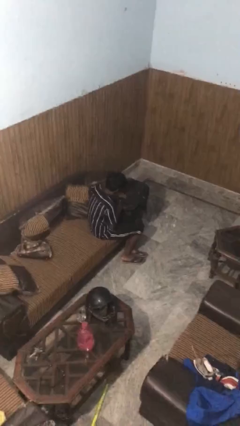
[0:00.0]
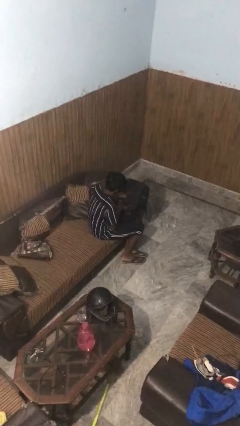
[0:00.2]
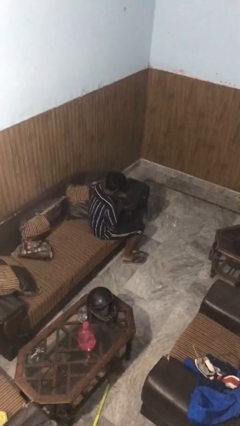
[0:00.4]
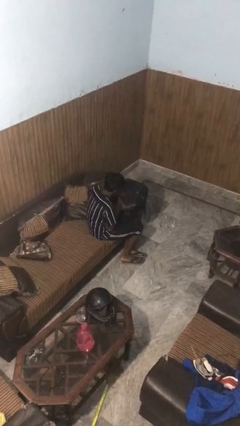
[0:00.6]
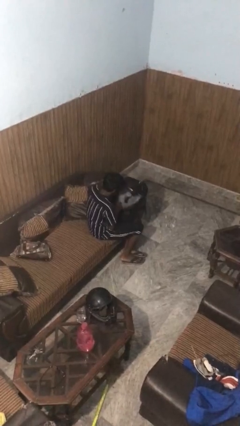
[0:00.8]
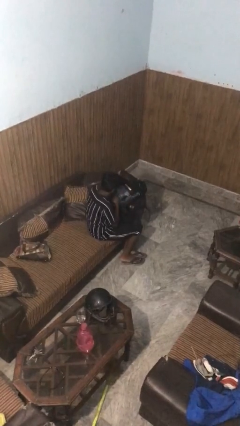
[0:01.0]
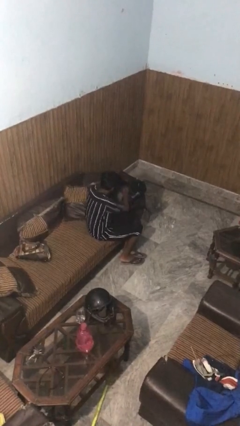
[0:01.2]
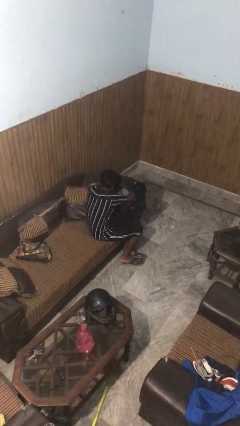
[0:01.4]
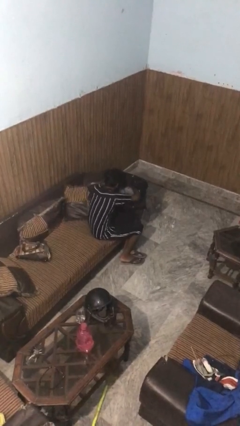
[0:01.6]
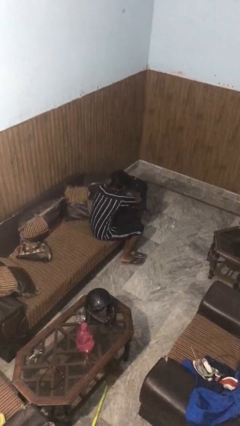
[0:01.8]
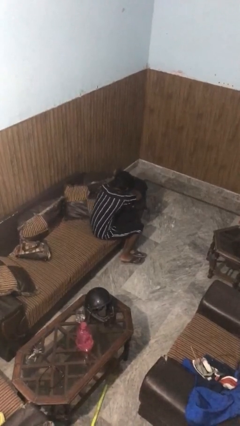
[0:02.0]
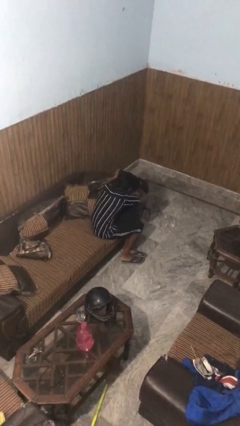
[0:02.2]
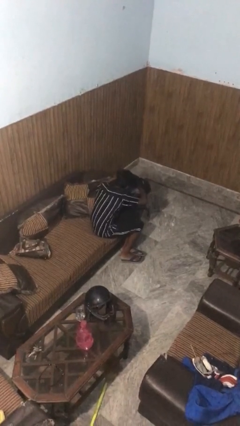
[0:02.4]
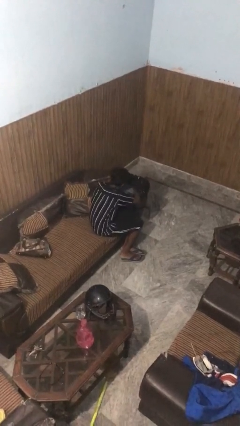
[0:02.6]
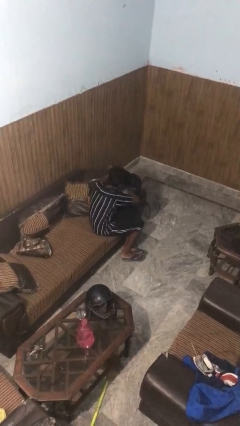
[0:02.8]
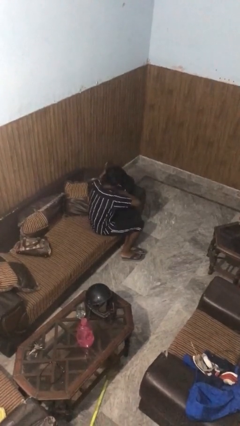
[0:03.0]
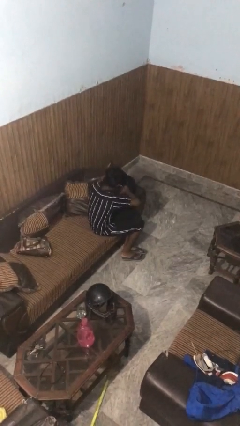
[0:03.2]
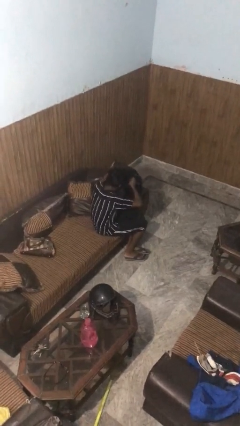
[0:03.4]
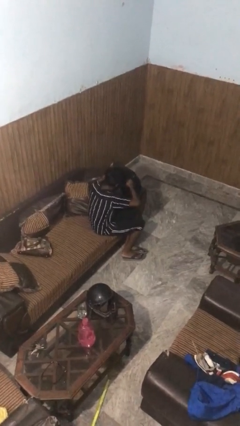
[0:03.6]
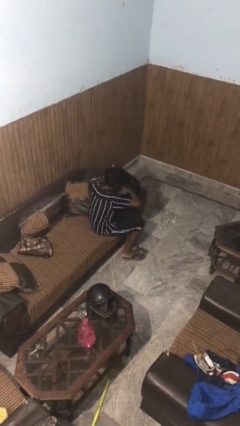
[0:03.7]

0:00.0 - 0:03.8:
person searches in backpack

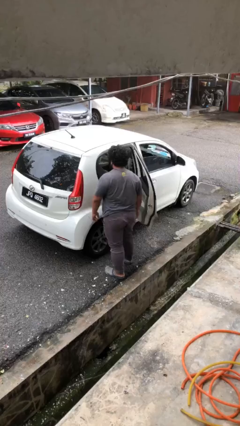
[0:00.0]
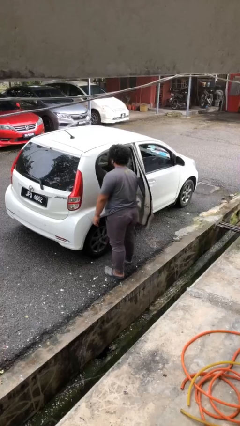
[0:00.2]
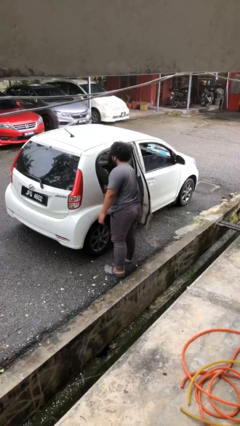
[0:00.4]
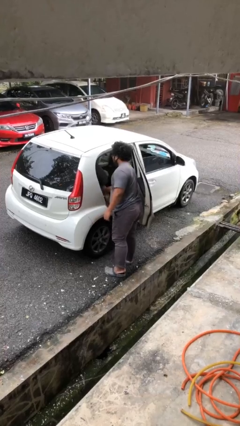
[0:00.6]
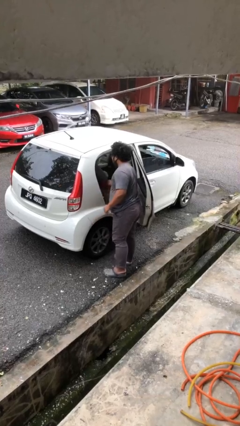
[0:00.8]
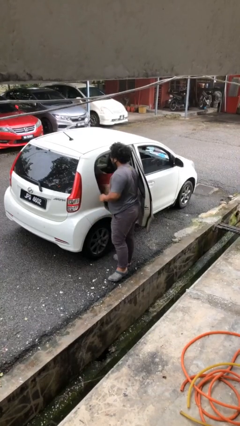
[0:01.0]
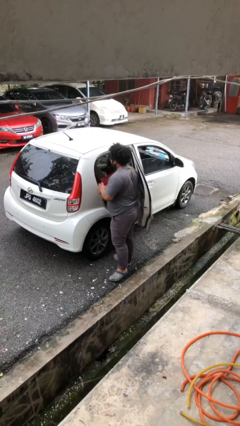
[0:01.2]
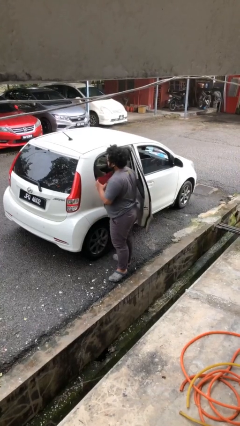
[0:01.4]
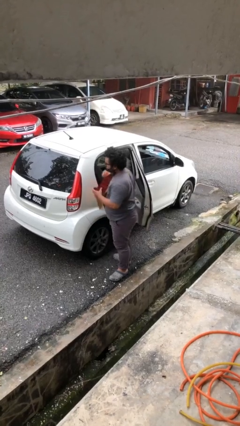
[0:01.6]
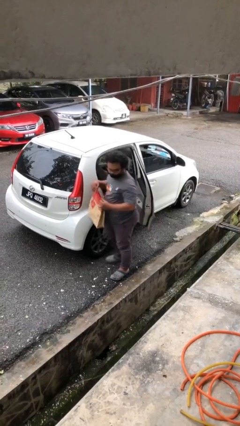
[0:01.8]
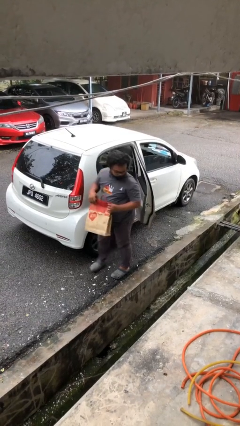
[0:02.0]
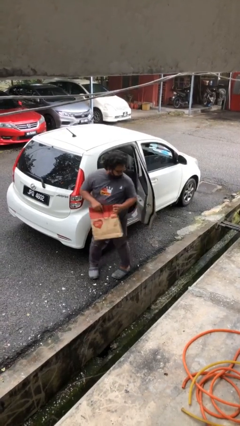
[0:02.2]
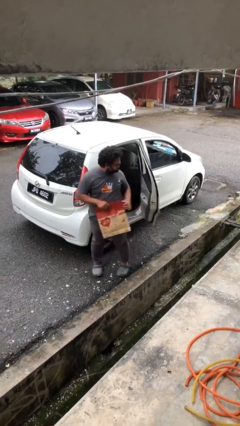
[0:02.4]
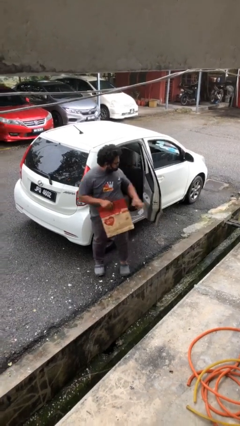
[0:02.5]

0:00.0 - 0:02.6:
person unloads car

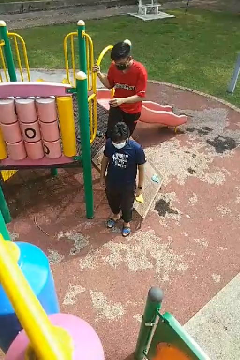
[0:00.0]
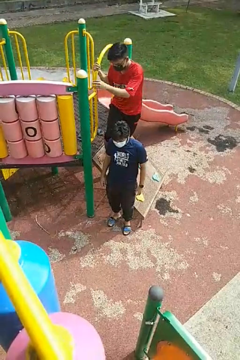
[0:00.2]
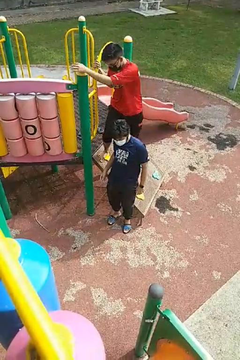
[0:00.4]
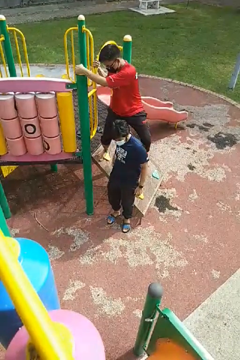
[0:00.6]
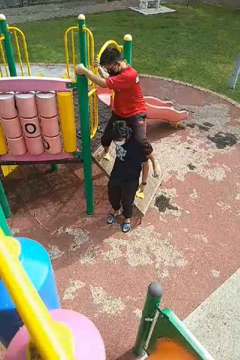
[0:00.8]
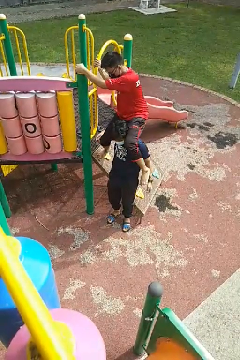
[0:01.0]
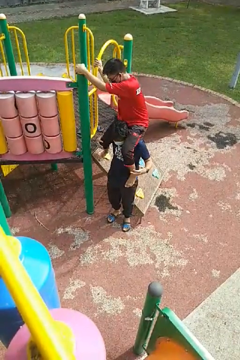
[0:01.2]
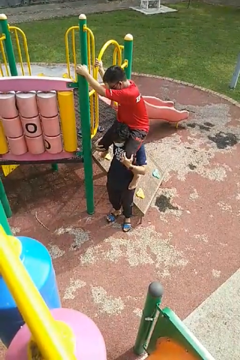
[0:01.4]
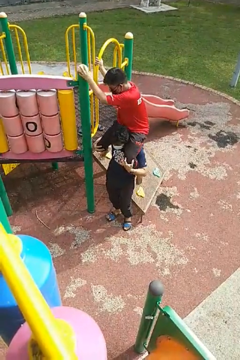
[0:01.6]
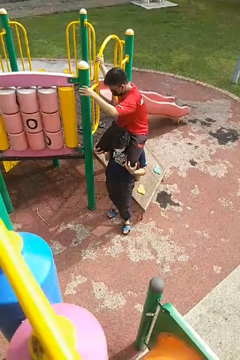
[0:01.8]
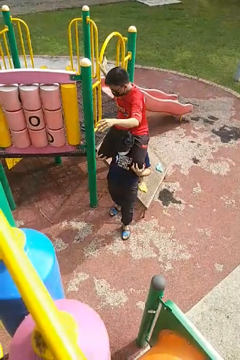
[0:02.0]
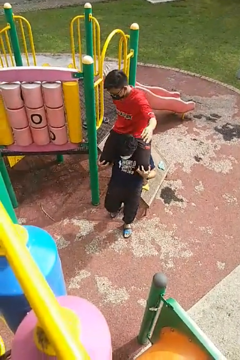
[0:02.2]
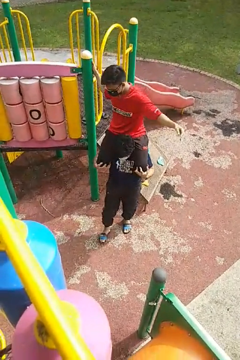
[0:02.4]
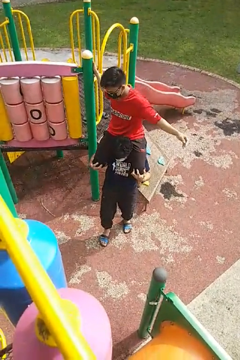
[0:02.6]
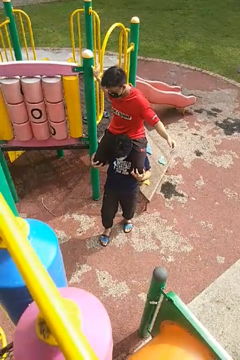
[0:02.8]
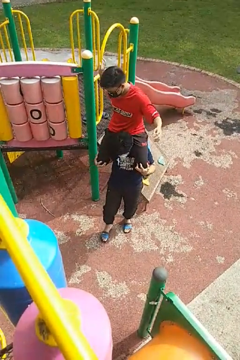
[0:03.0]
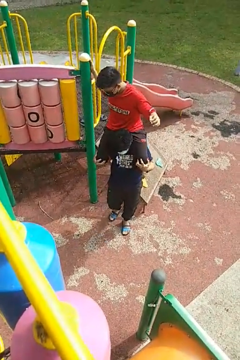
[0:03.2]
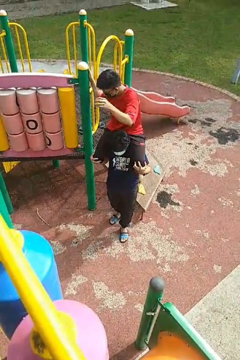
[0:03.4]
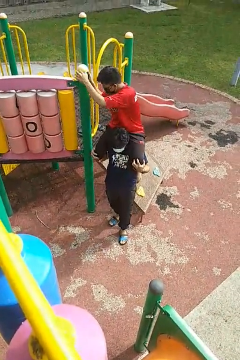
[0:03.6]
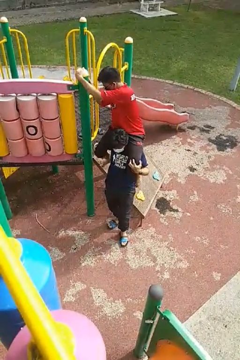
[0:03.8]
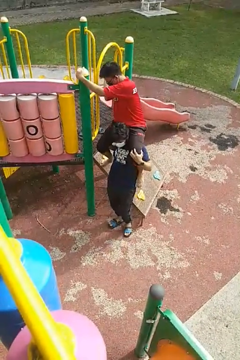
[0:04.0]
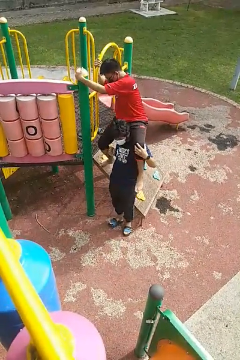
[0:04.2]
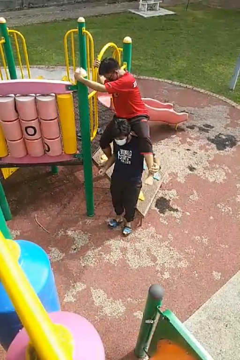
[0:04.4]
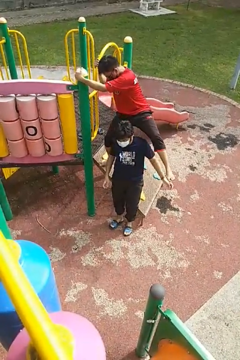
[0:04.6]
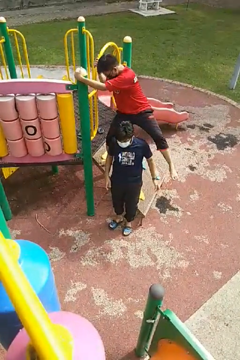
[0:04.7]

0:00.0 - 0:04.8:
person carries person on shoulders

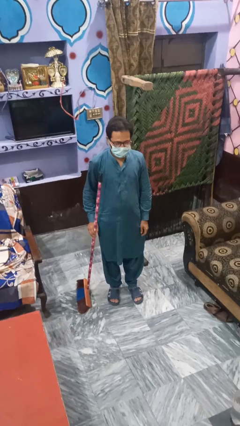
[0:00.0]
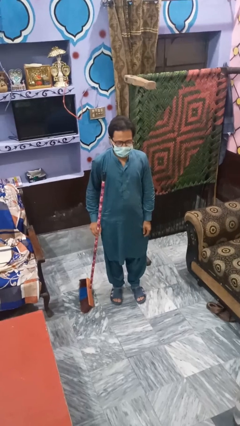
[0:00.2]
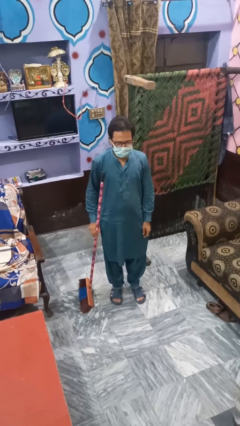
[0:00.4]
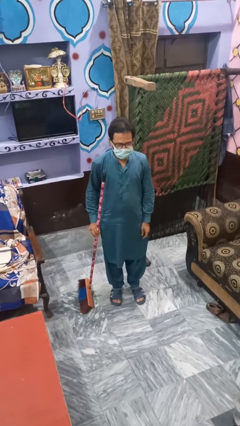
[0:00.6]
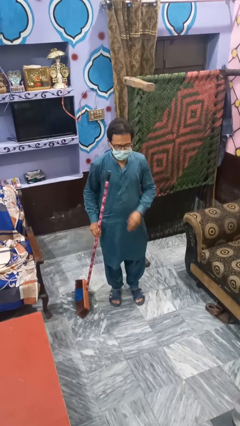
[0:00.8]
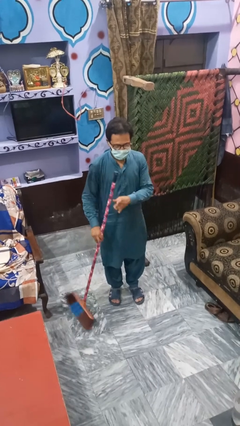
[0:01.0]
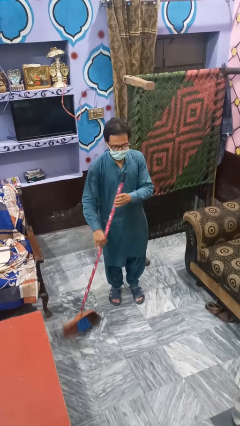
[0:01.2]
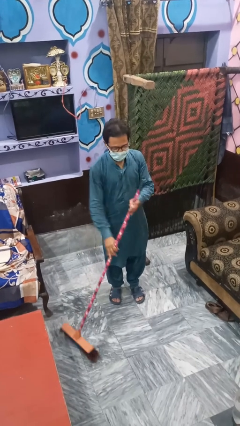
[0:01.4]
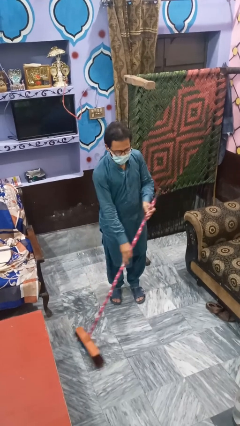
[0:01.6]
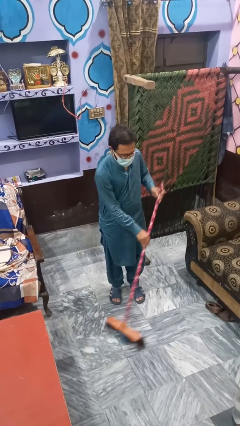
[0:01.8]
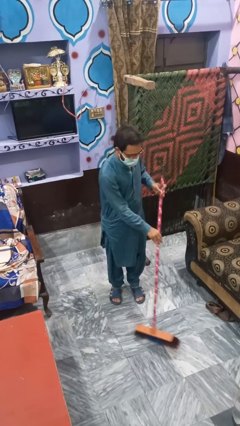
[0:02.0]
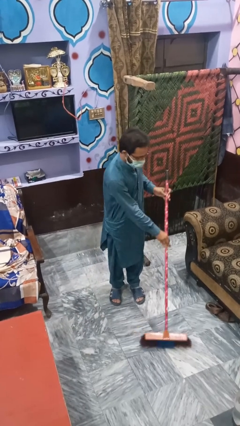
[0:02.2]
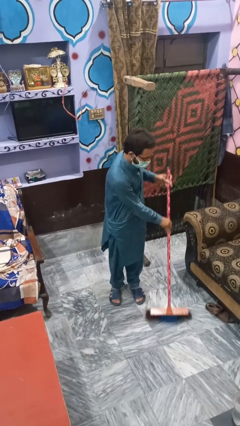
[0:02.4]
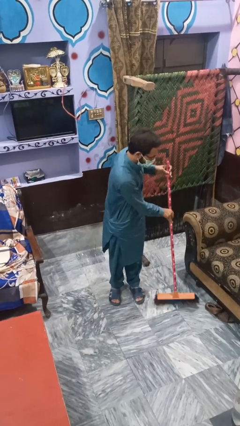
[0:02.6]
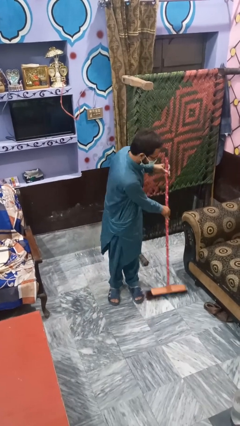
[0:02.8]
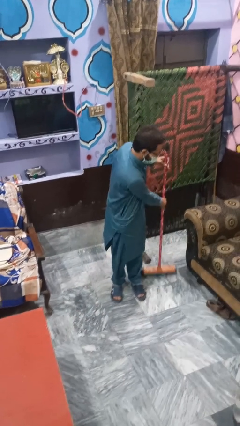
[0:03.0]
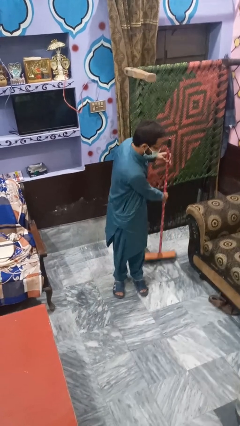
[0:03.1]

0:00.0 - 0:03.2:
person mops

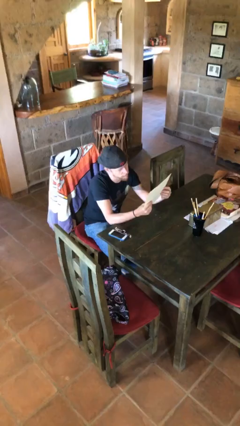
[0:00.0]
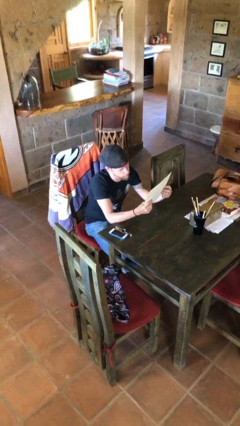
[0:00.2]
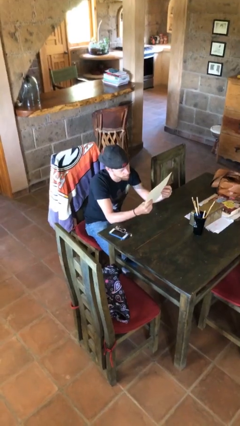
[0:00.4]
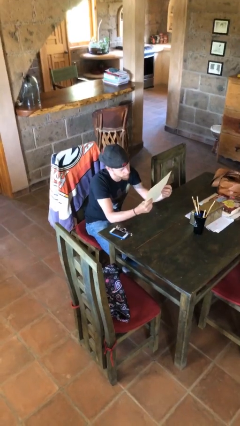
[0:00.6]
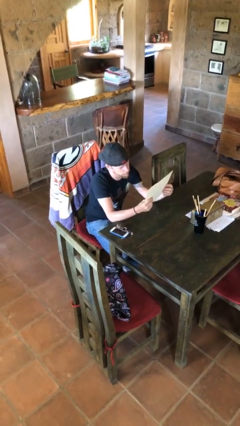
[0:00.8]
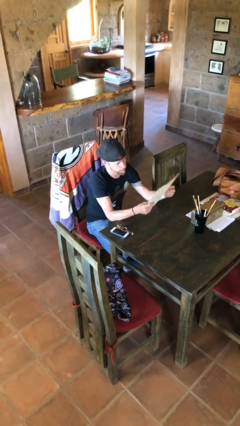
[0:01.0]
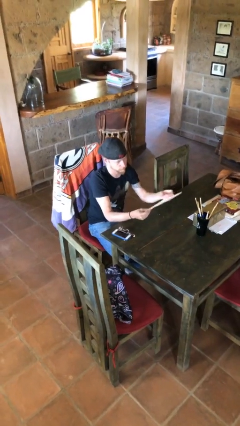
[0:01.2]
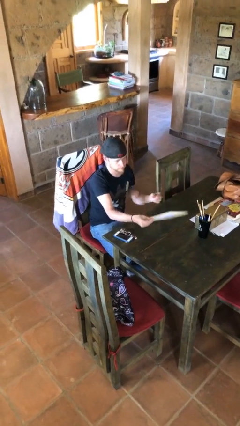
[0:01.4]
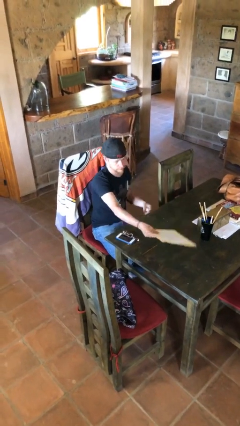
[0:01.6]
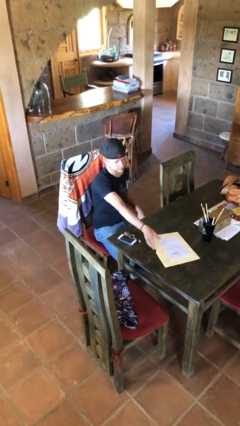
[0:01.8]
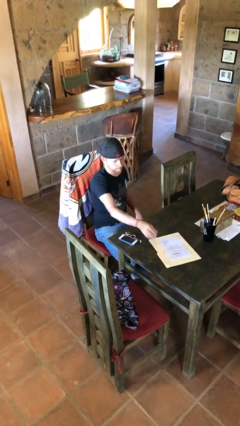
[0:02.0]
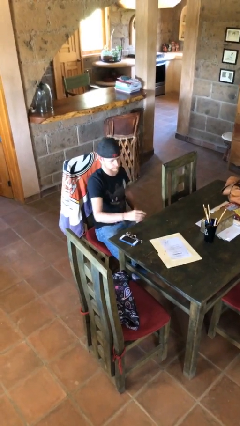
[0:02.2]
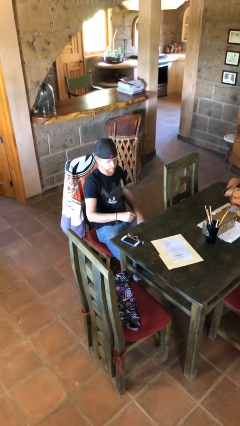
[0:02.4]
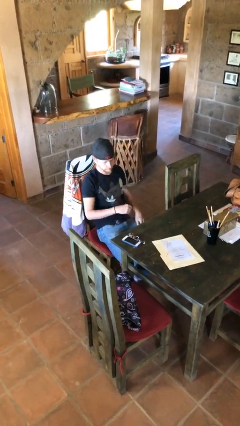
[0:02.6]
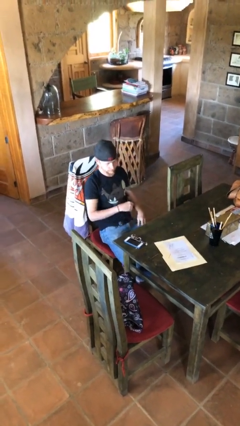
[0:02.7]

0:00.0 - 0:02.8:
person puts down object on table

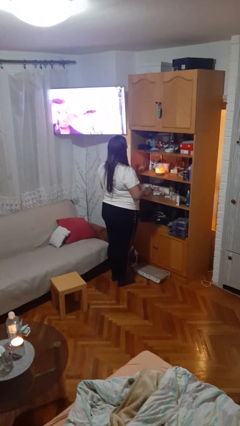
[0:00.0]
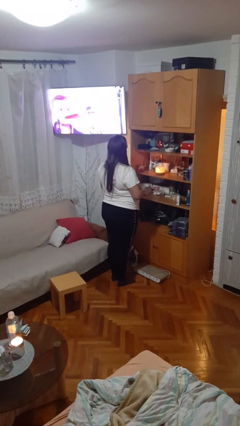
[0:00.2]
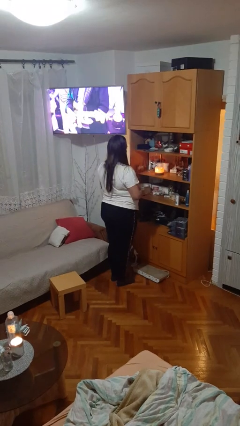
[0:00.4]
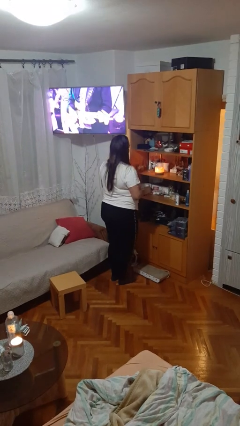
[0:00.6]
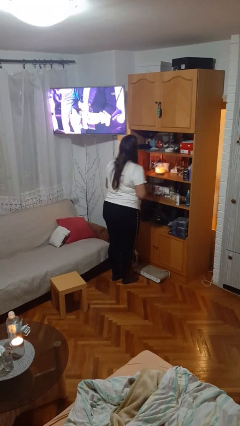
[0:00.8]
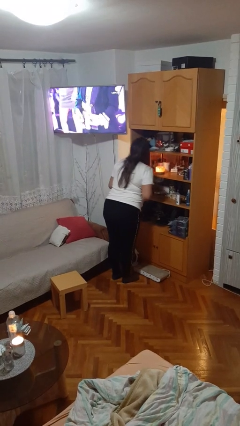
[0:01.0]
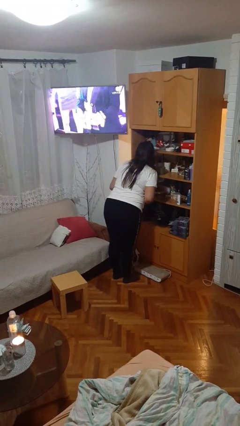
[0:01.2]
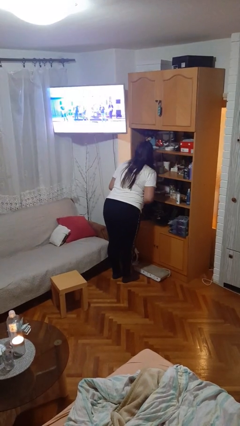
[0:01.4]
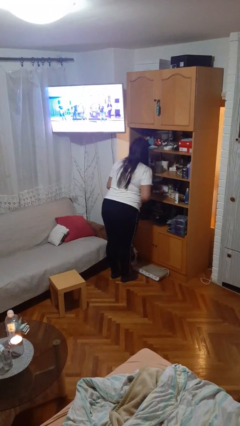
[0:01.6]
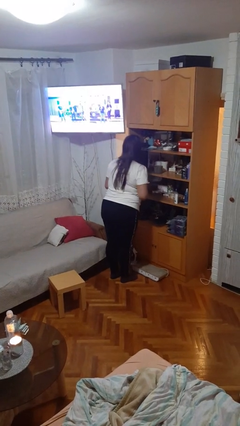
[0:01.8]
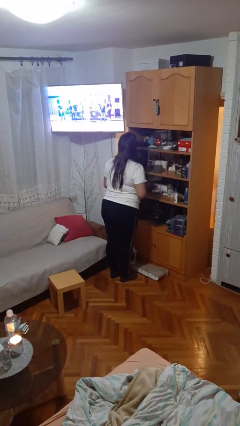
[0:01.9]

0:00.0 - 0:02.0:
person extinguishes candle
